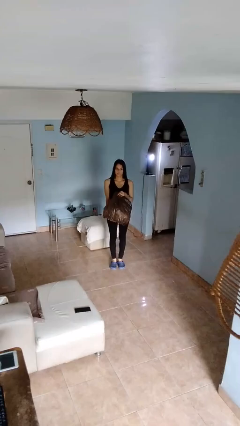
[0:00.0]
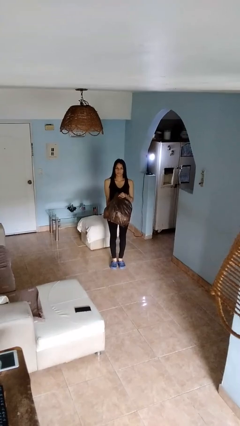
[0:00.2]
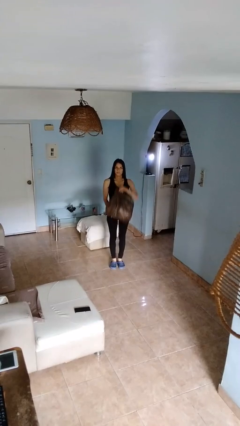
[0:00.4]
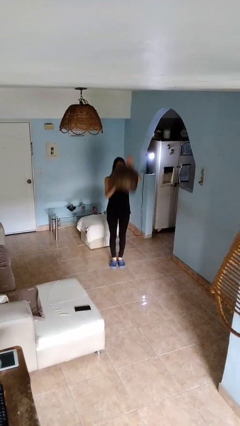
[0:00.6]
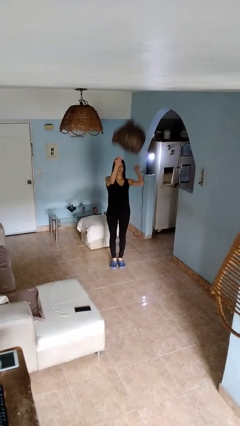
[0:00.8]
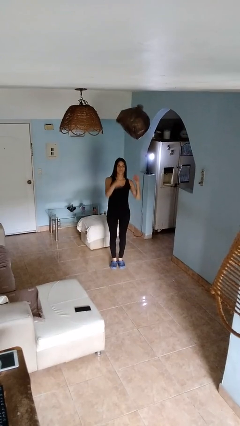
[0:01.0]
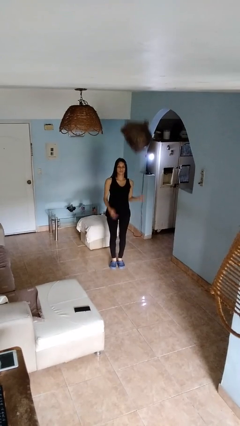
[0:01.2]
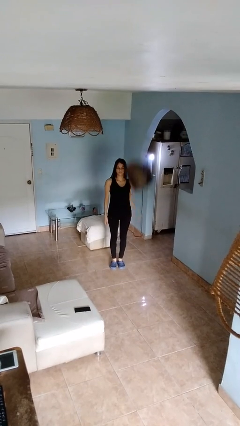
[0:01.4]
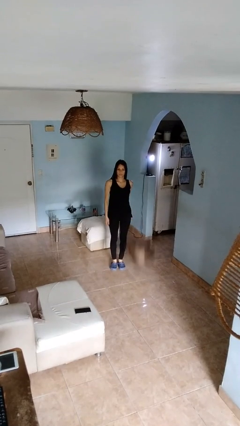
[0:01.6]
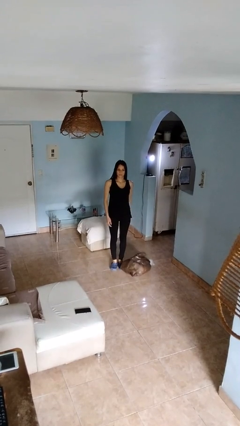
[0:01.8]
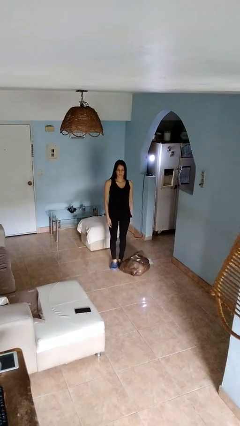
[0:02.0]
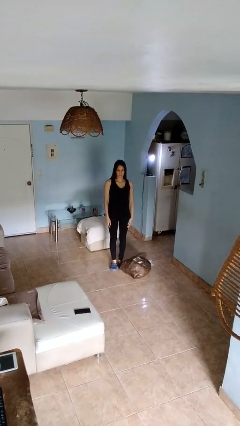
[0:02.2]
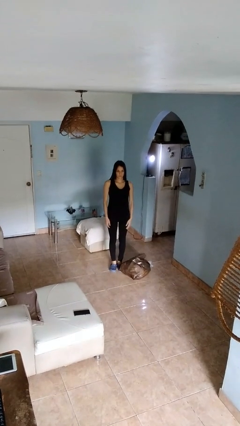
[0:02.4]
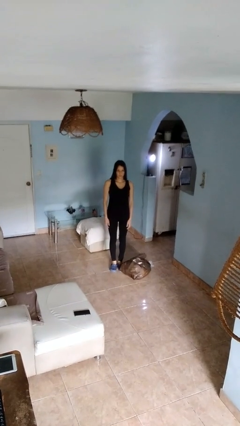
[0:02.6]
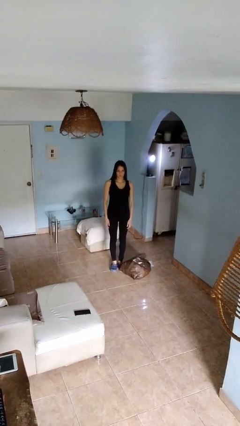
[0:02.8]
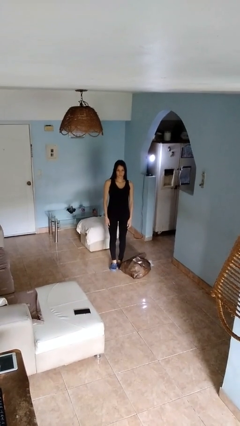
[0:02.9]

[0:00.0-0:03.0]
person throws object into air

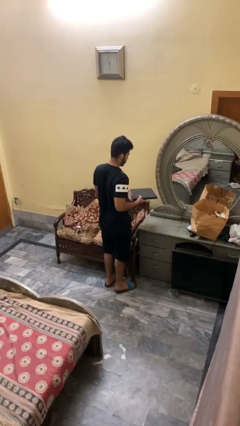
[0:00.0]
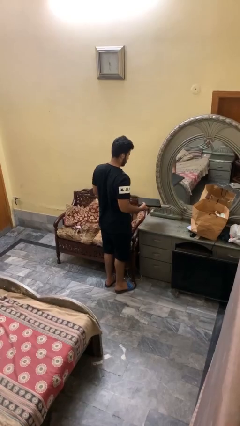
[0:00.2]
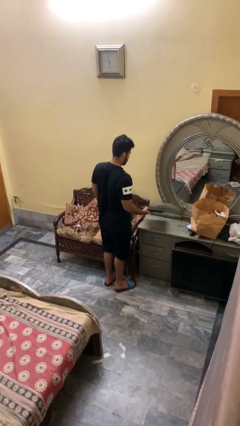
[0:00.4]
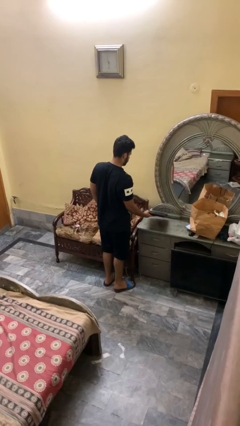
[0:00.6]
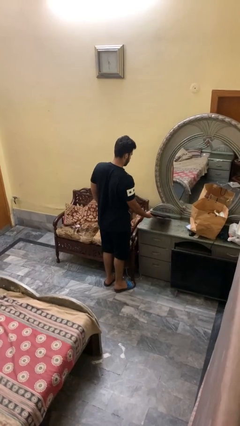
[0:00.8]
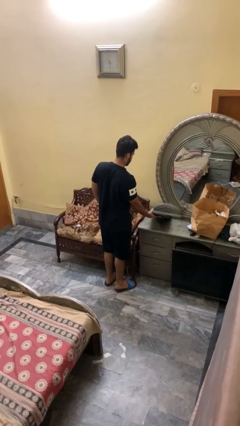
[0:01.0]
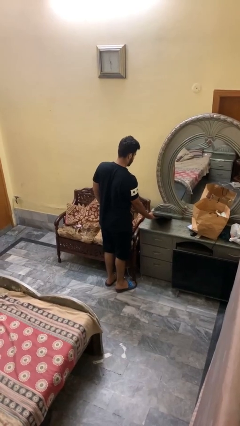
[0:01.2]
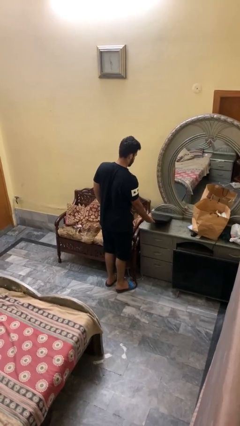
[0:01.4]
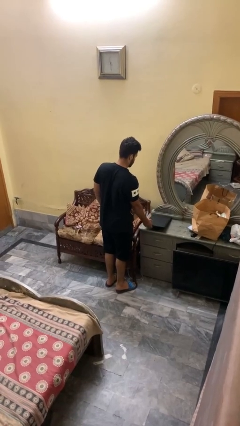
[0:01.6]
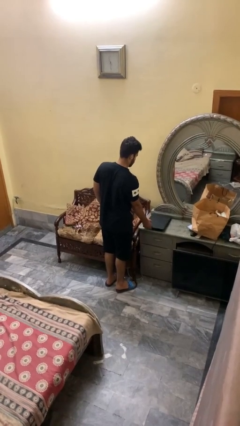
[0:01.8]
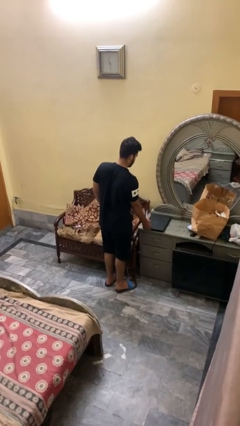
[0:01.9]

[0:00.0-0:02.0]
person puts down object on countertop

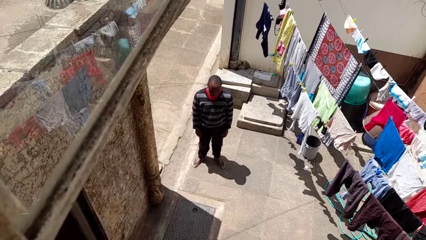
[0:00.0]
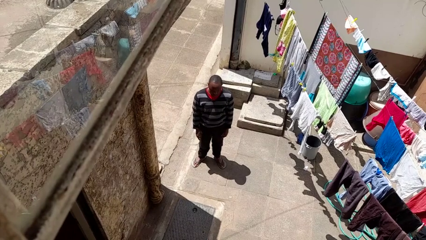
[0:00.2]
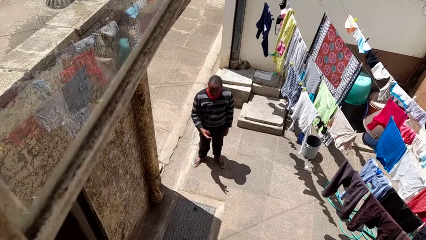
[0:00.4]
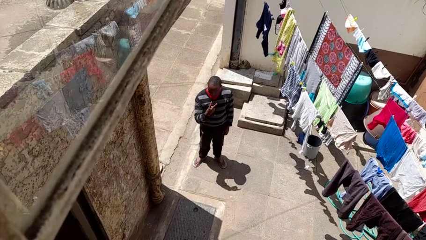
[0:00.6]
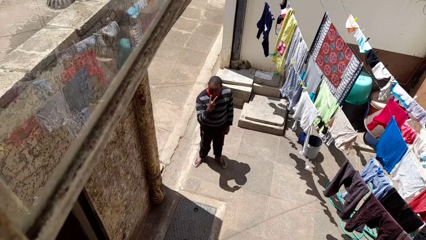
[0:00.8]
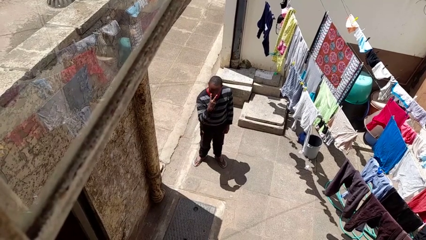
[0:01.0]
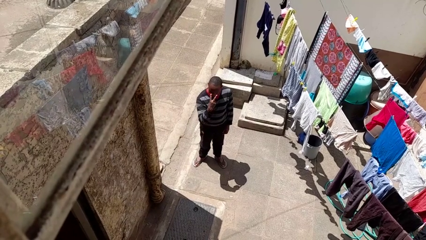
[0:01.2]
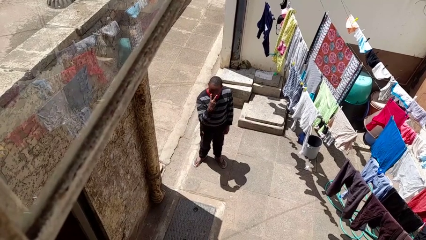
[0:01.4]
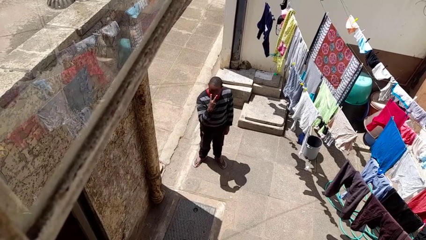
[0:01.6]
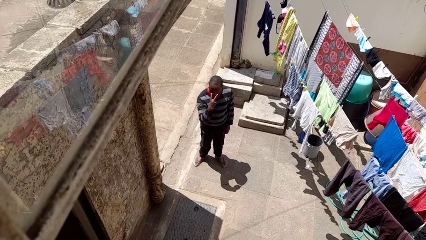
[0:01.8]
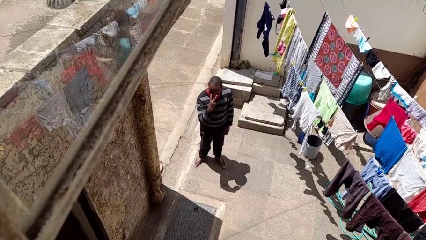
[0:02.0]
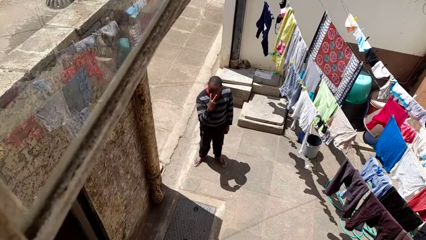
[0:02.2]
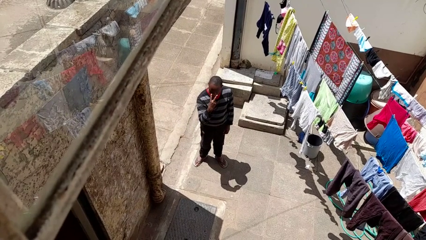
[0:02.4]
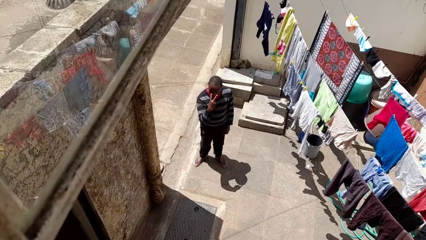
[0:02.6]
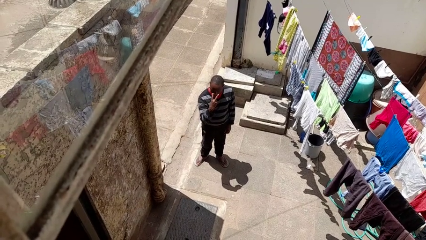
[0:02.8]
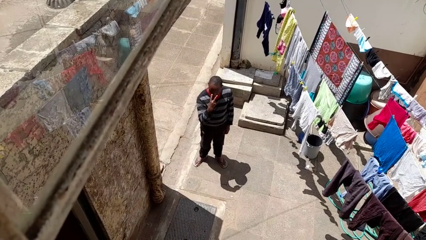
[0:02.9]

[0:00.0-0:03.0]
person gestures watch closely

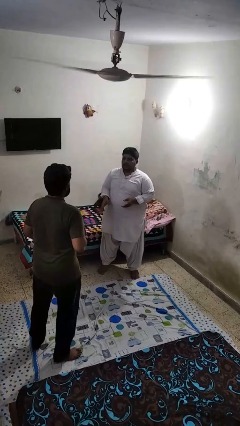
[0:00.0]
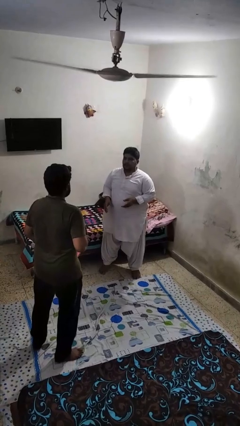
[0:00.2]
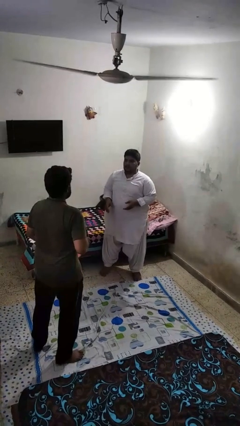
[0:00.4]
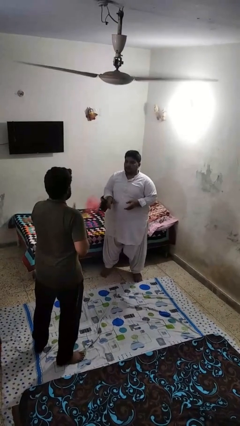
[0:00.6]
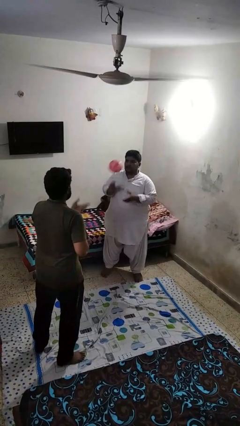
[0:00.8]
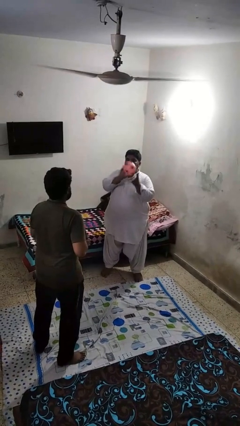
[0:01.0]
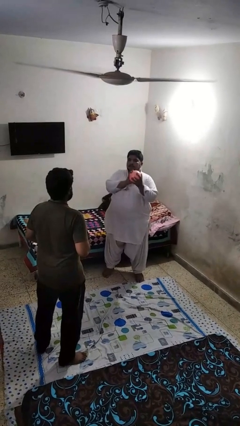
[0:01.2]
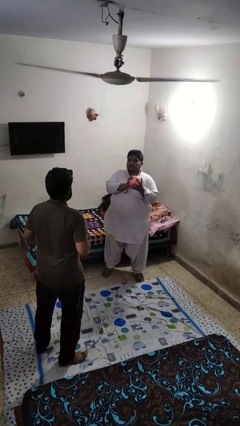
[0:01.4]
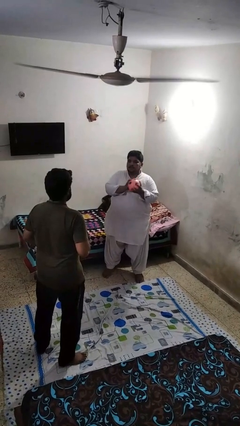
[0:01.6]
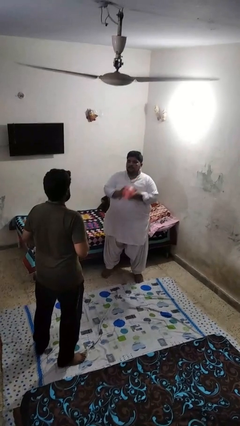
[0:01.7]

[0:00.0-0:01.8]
person catches object from person

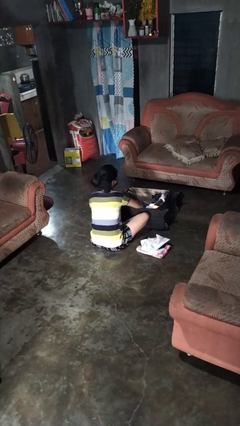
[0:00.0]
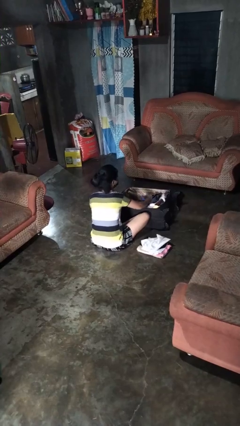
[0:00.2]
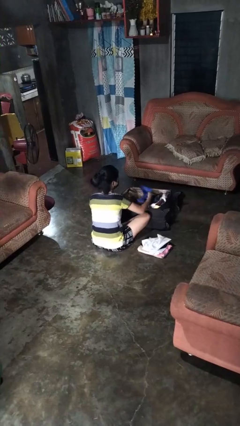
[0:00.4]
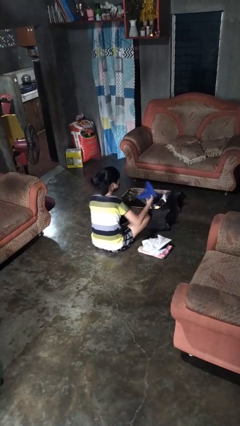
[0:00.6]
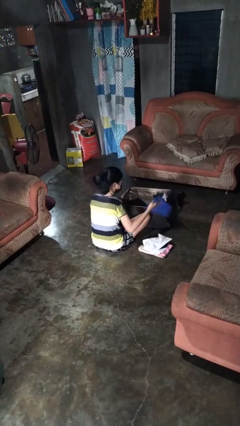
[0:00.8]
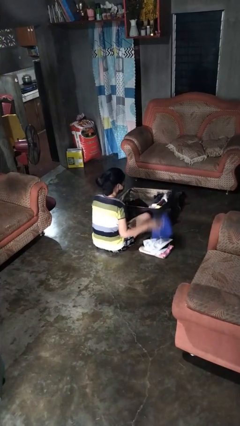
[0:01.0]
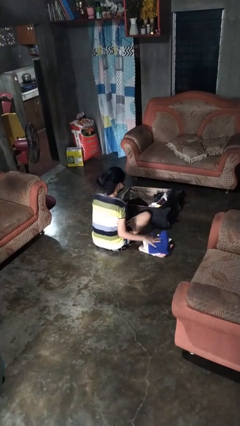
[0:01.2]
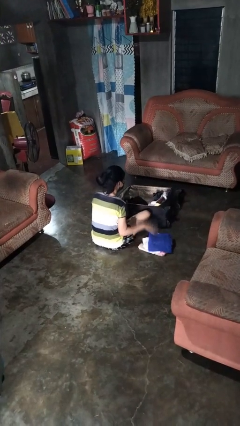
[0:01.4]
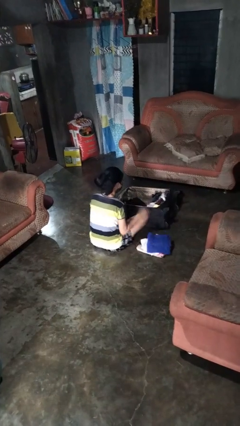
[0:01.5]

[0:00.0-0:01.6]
person unloads clothes from suitcase

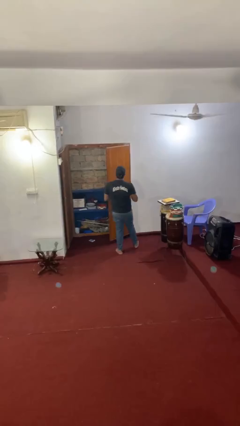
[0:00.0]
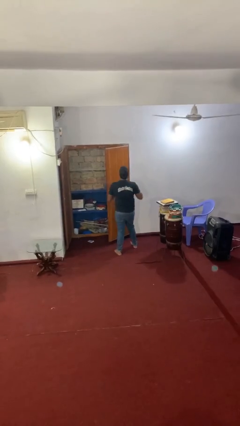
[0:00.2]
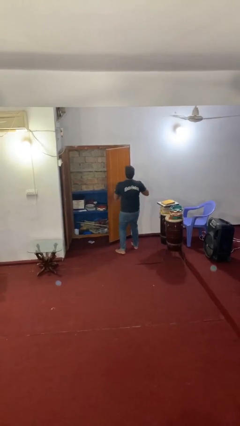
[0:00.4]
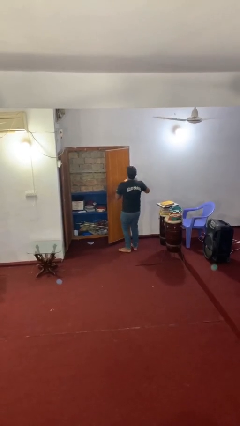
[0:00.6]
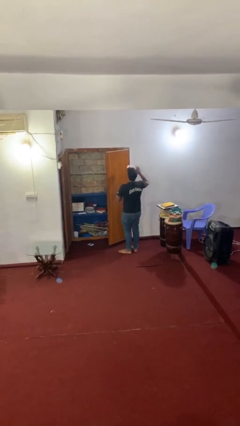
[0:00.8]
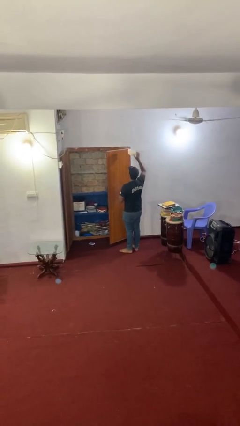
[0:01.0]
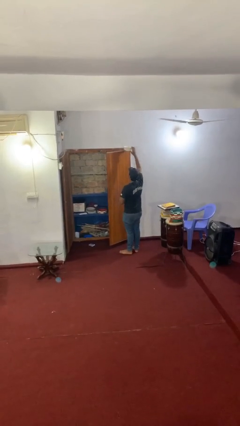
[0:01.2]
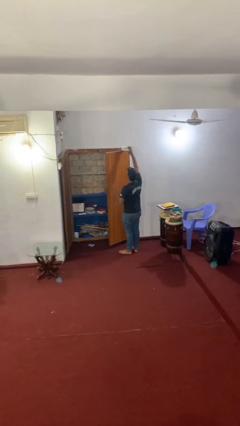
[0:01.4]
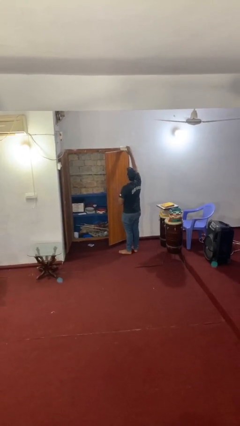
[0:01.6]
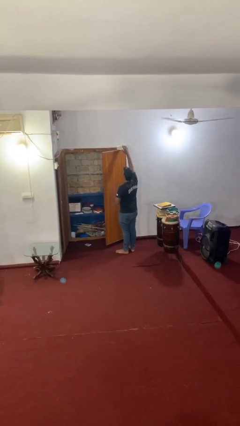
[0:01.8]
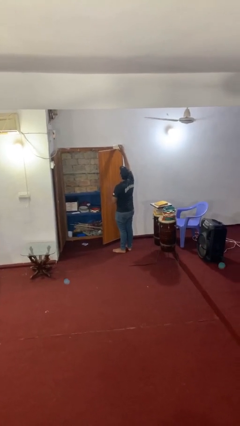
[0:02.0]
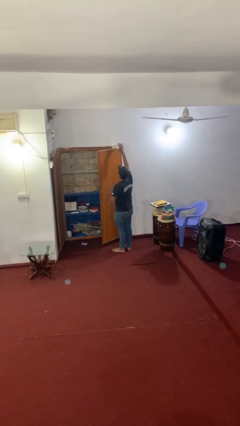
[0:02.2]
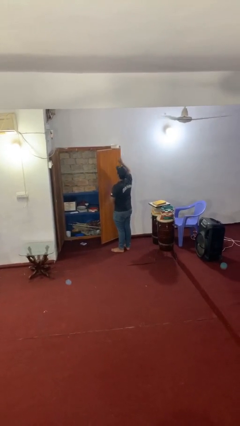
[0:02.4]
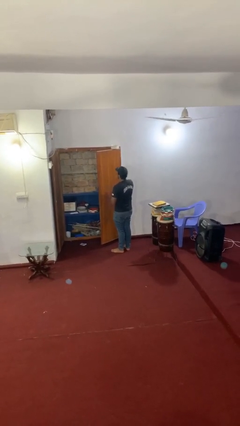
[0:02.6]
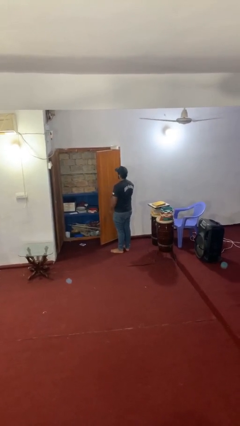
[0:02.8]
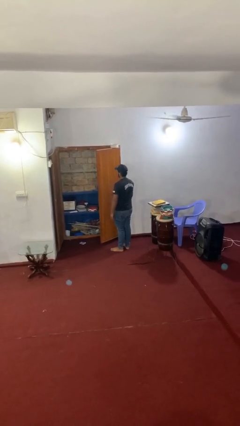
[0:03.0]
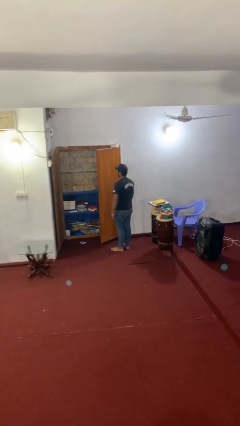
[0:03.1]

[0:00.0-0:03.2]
person puts down object on shelf

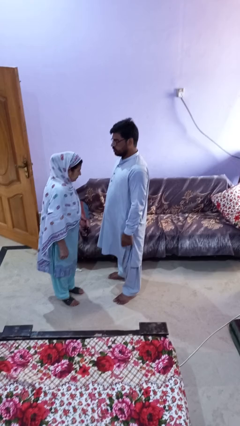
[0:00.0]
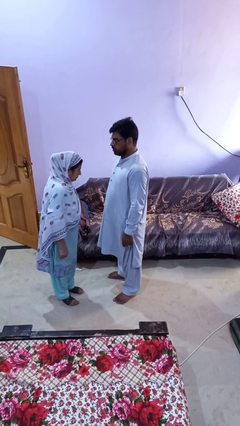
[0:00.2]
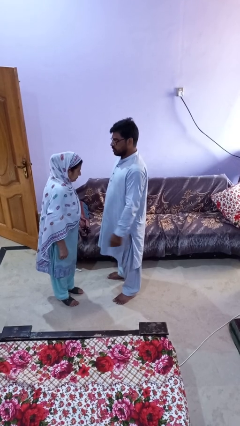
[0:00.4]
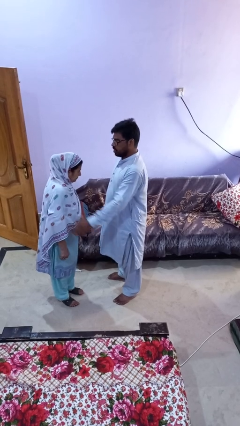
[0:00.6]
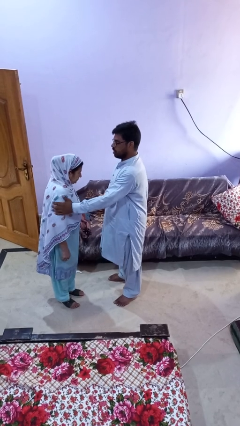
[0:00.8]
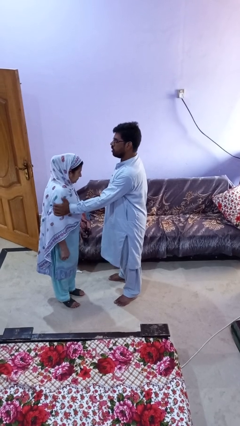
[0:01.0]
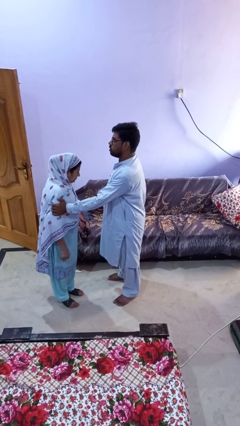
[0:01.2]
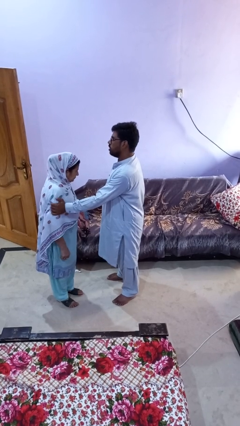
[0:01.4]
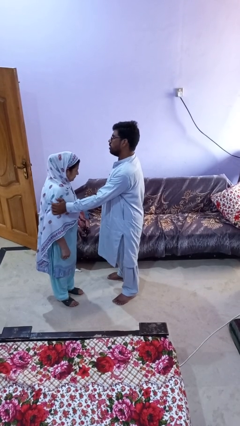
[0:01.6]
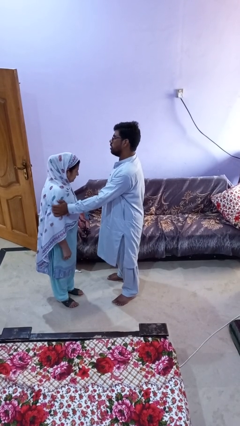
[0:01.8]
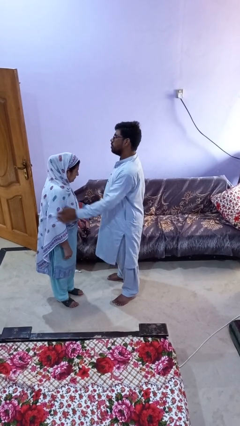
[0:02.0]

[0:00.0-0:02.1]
person grabs person by bicep

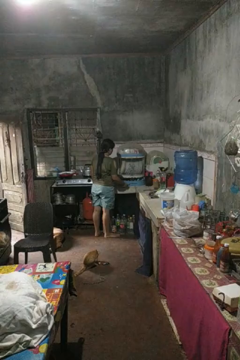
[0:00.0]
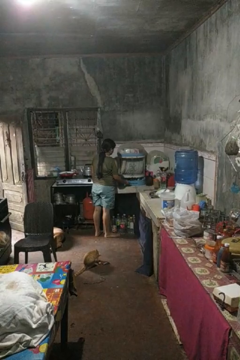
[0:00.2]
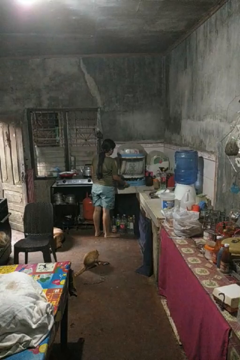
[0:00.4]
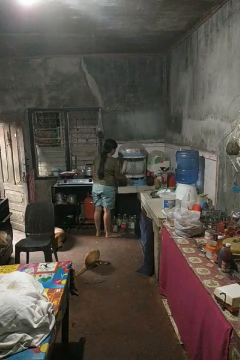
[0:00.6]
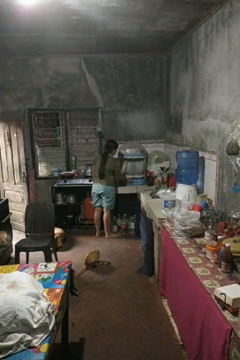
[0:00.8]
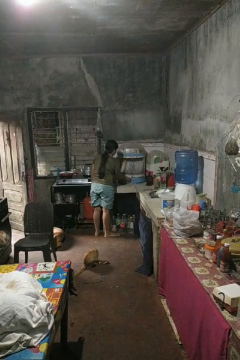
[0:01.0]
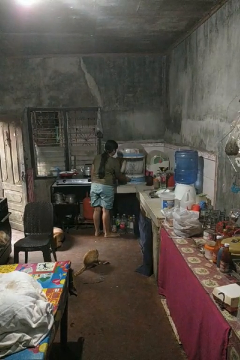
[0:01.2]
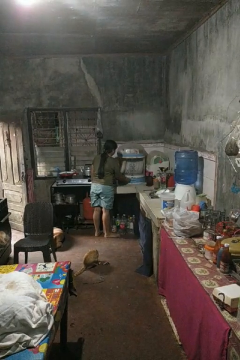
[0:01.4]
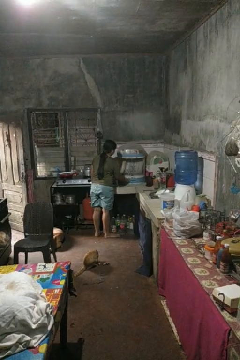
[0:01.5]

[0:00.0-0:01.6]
person closes kitchen drawer
